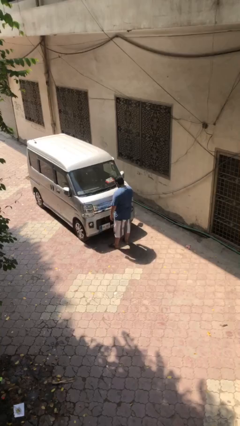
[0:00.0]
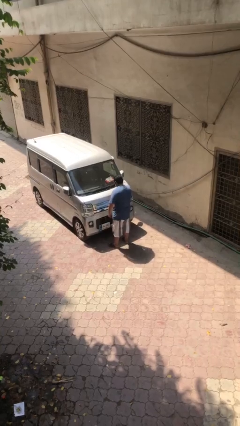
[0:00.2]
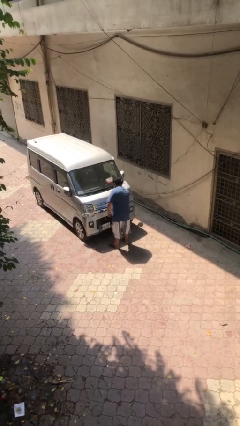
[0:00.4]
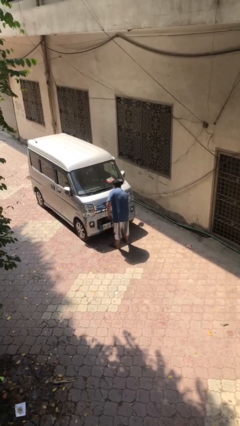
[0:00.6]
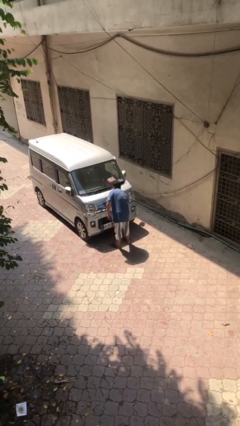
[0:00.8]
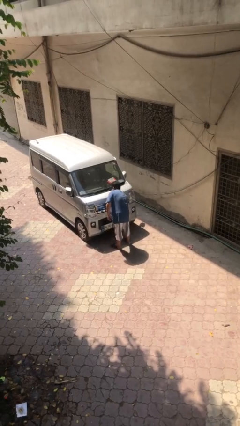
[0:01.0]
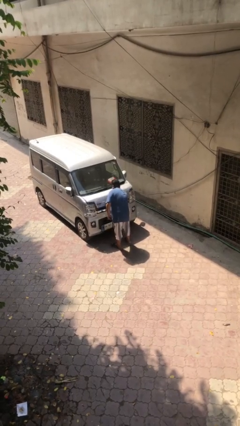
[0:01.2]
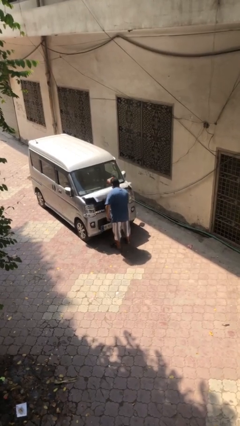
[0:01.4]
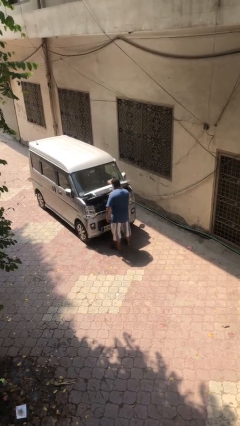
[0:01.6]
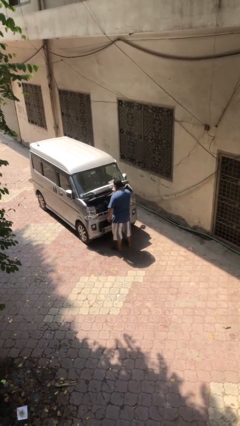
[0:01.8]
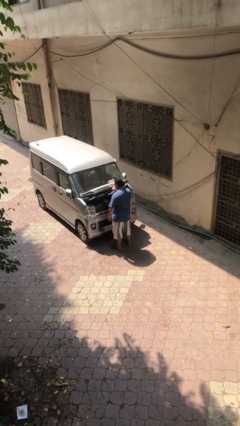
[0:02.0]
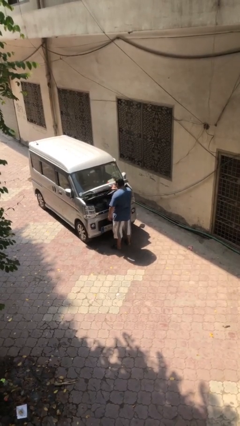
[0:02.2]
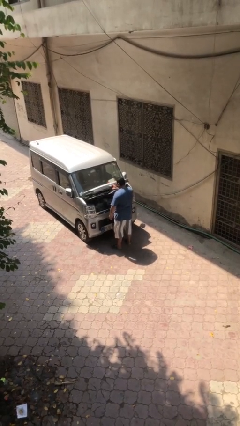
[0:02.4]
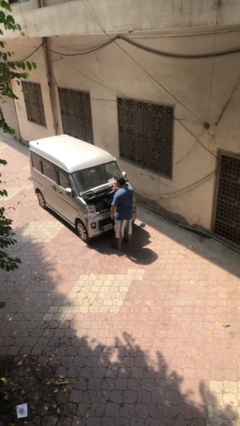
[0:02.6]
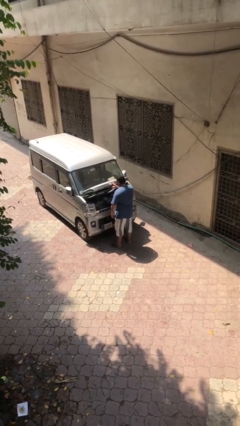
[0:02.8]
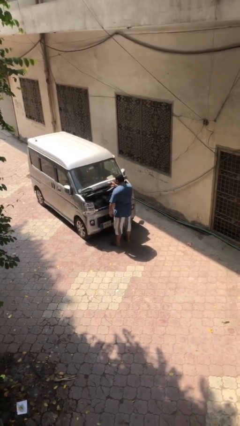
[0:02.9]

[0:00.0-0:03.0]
person opens car hood

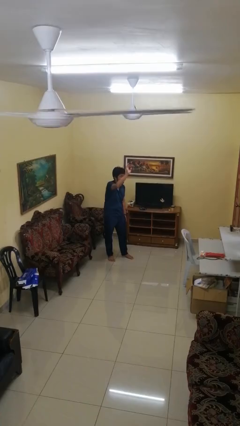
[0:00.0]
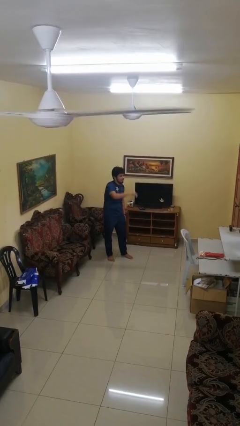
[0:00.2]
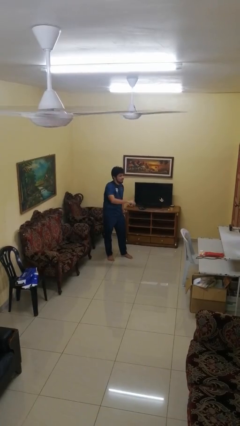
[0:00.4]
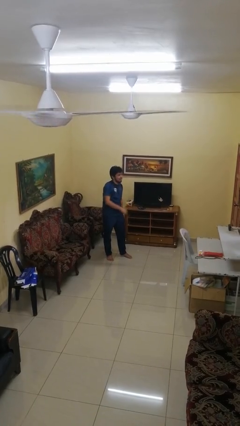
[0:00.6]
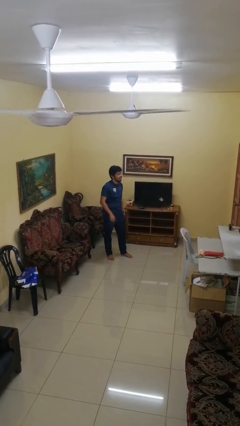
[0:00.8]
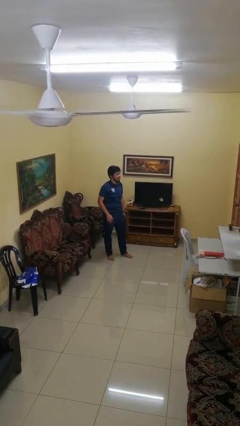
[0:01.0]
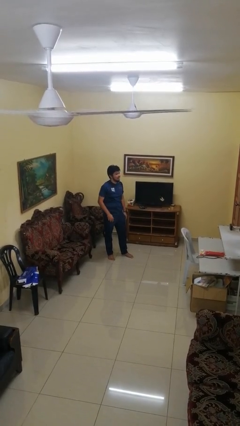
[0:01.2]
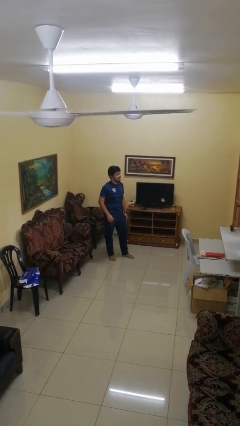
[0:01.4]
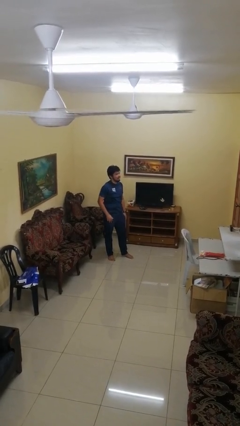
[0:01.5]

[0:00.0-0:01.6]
person gestures swipe down

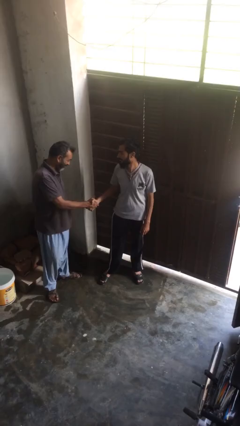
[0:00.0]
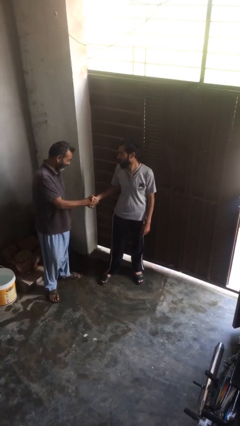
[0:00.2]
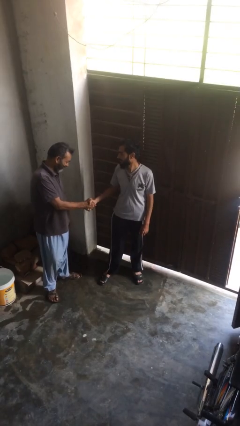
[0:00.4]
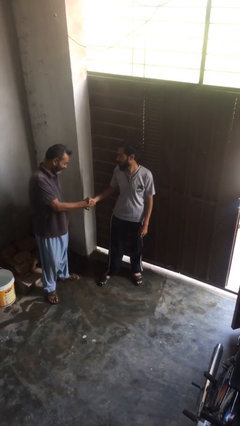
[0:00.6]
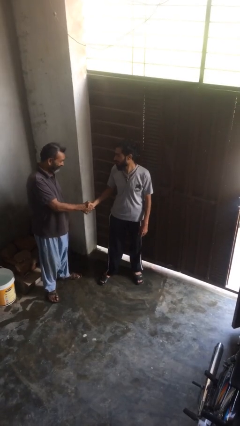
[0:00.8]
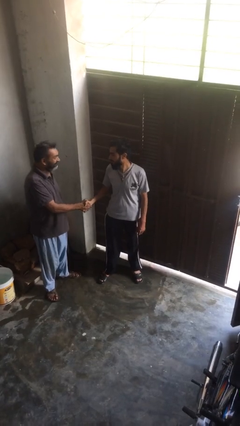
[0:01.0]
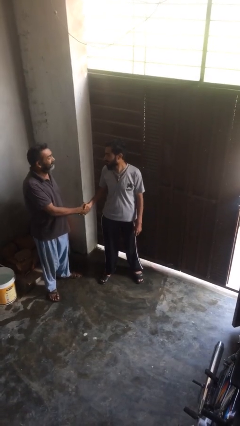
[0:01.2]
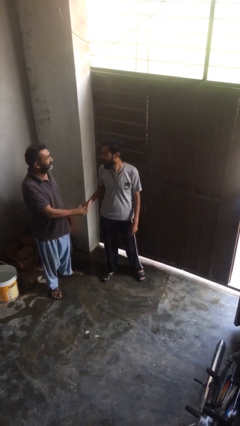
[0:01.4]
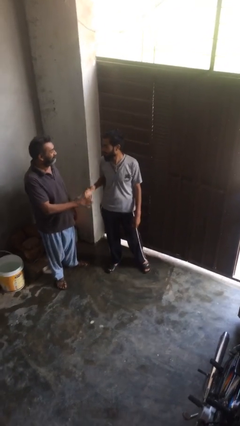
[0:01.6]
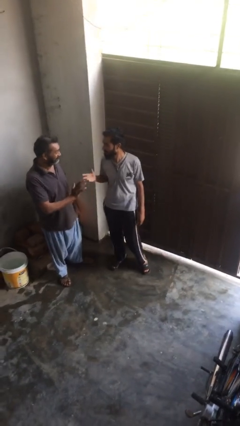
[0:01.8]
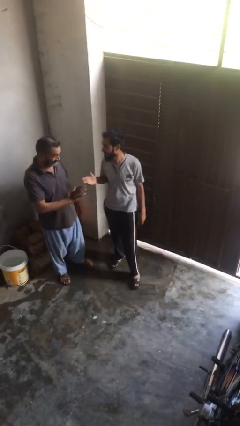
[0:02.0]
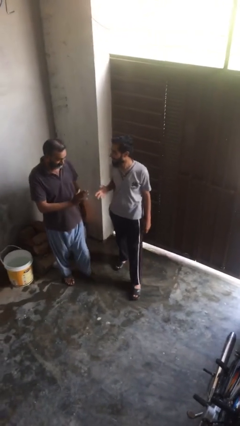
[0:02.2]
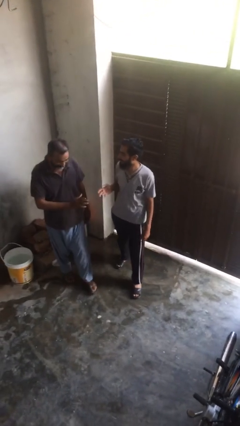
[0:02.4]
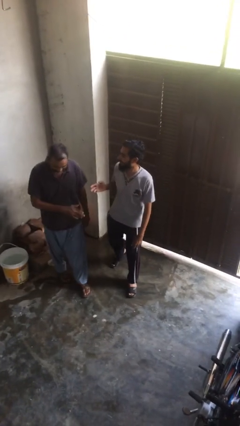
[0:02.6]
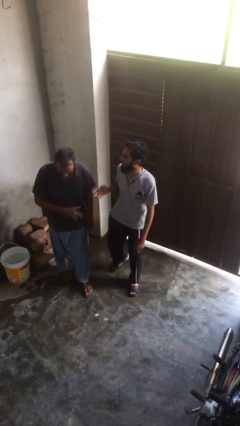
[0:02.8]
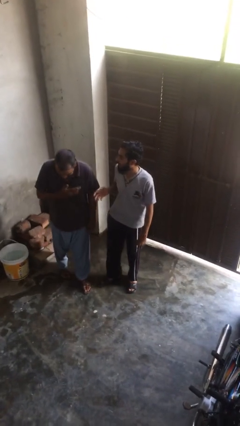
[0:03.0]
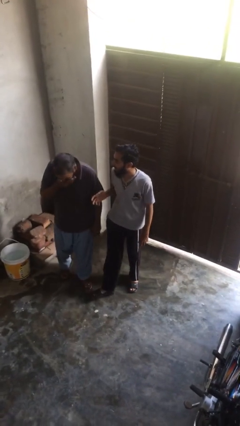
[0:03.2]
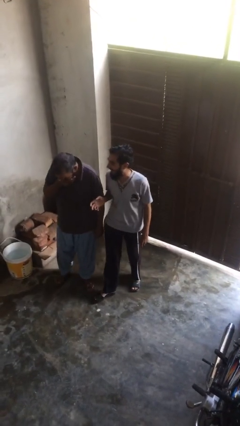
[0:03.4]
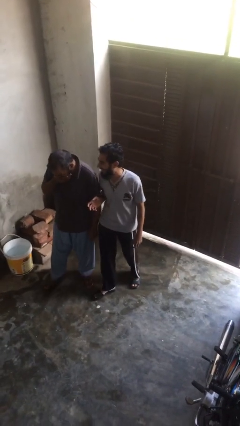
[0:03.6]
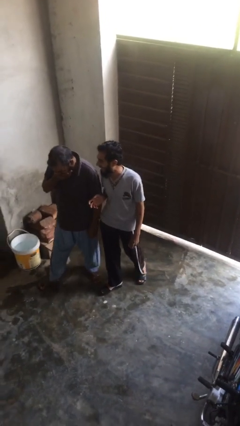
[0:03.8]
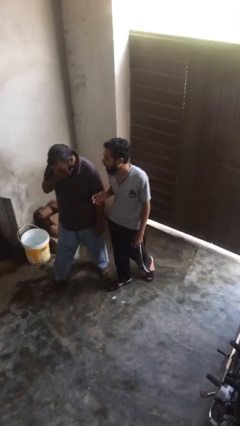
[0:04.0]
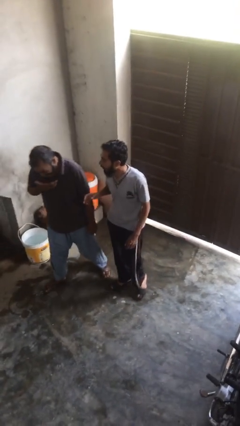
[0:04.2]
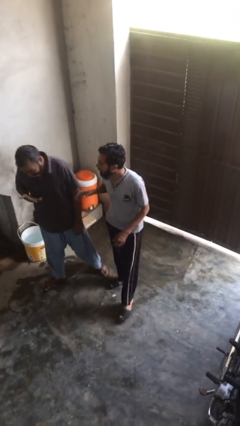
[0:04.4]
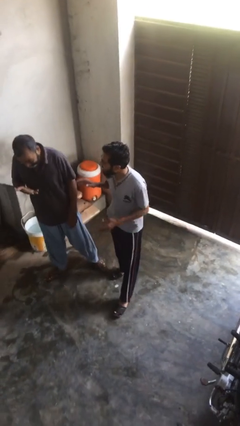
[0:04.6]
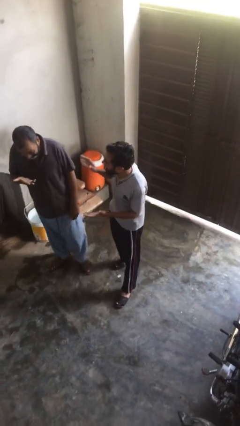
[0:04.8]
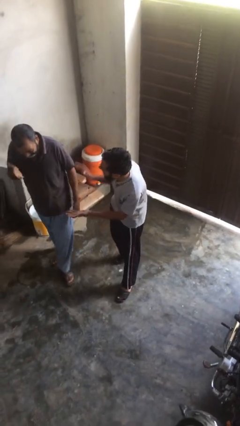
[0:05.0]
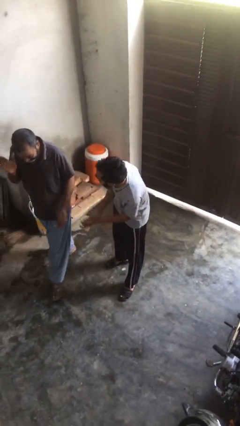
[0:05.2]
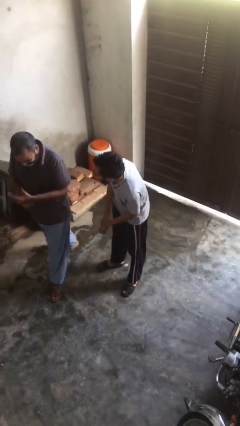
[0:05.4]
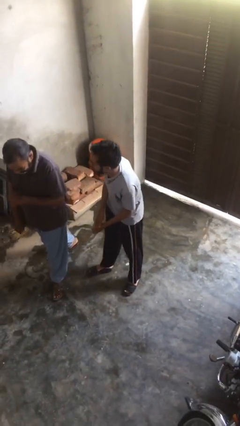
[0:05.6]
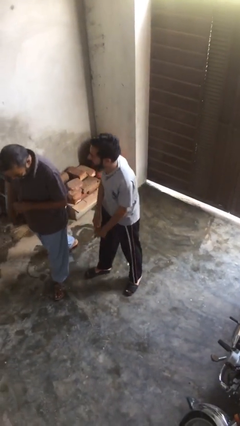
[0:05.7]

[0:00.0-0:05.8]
person talks to person

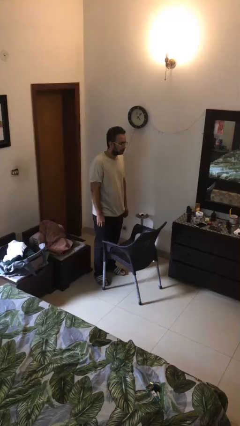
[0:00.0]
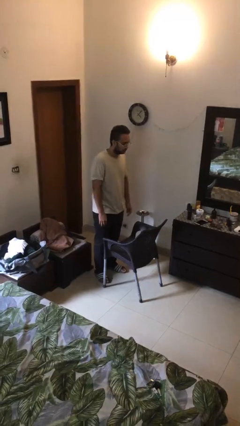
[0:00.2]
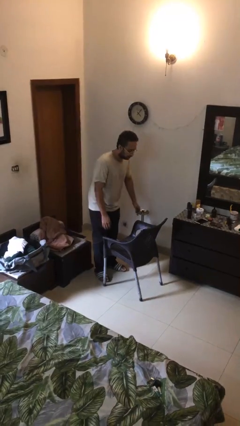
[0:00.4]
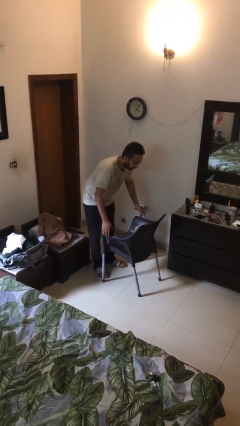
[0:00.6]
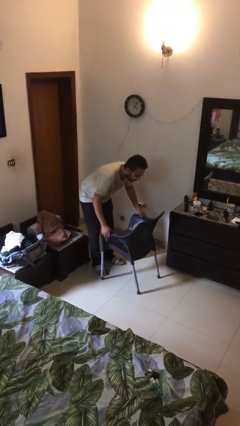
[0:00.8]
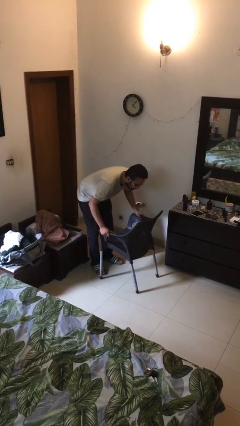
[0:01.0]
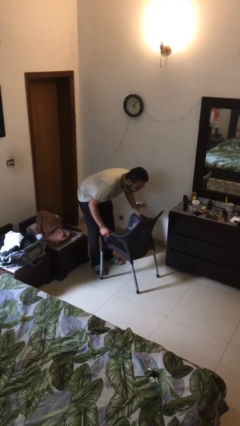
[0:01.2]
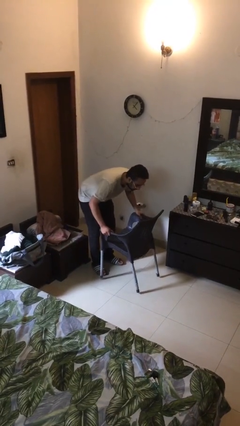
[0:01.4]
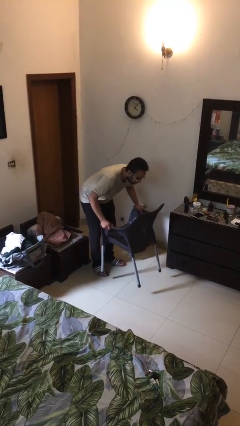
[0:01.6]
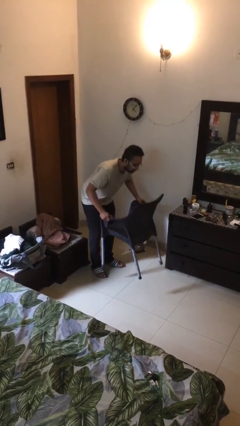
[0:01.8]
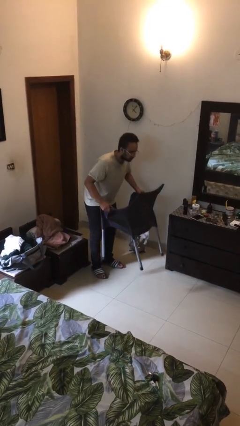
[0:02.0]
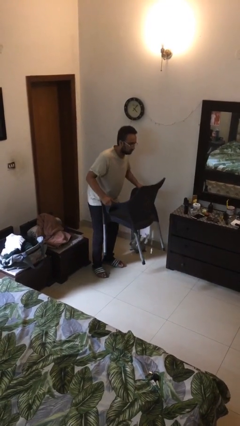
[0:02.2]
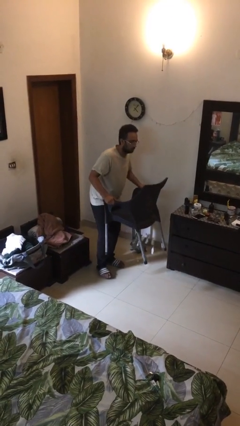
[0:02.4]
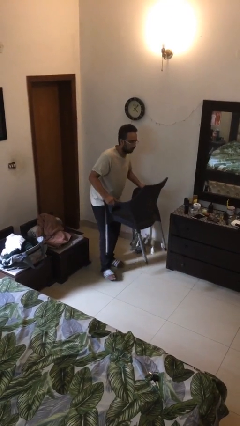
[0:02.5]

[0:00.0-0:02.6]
person picks up object from floor

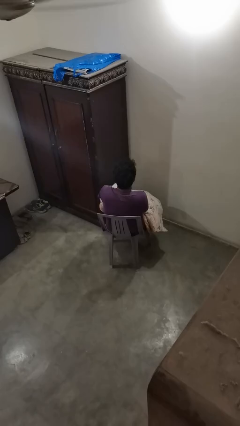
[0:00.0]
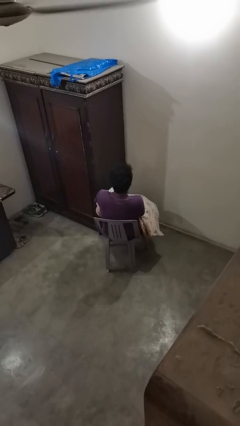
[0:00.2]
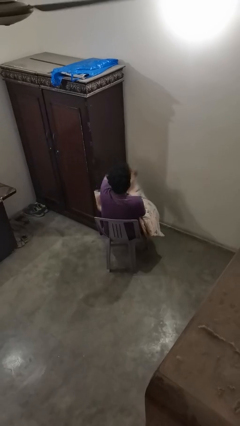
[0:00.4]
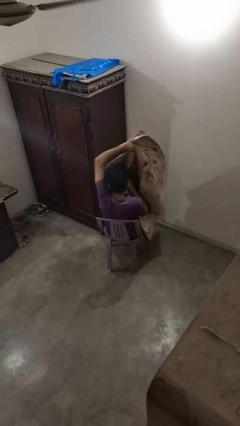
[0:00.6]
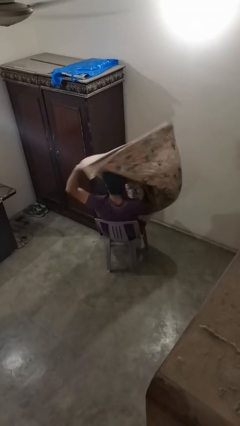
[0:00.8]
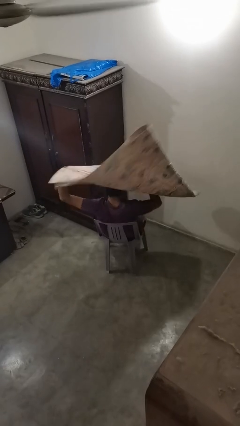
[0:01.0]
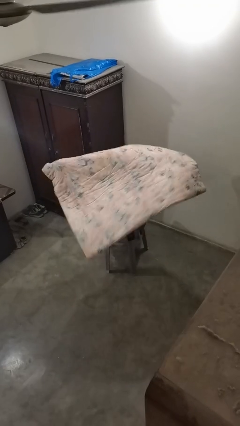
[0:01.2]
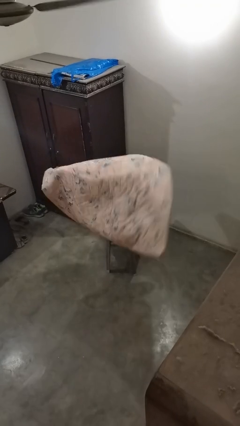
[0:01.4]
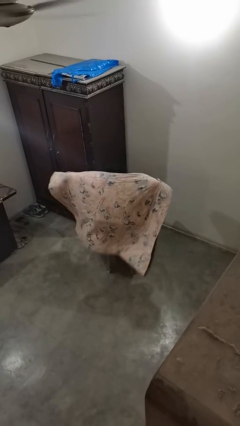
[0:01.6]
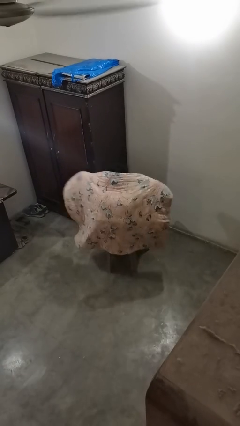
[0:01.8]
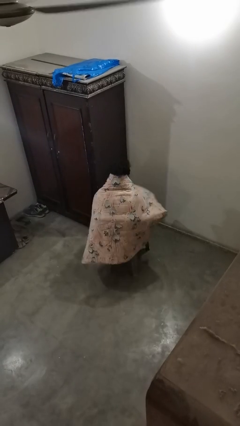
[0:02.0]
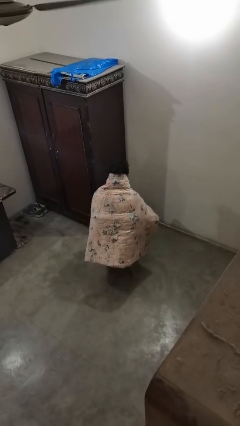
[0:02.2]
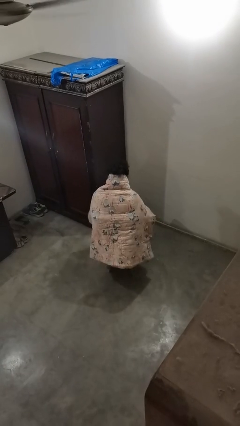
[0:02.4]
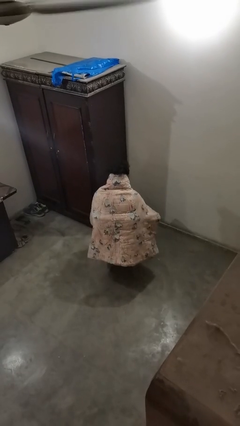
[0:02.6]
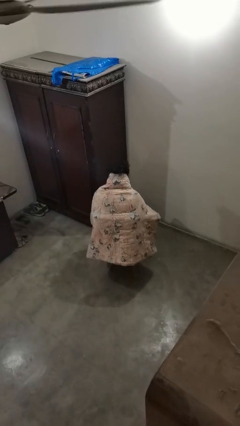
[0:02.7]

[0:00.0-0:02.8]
person covers with blanket

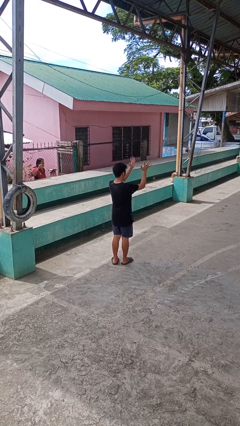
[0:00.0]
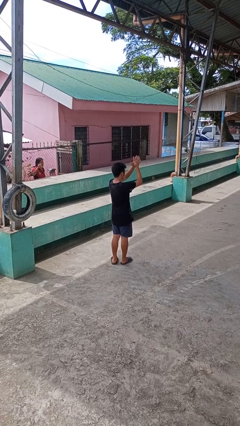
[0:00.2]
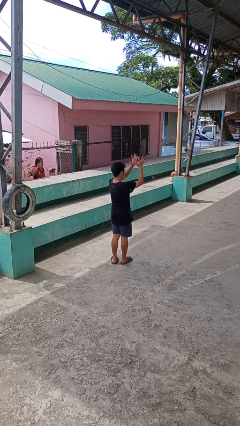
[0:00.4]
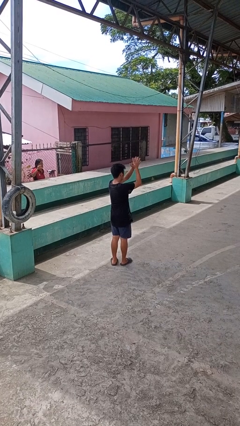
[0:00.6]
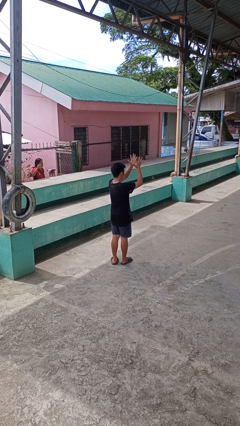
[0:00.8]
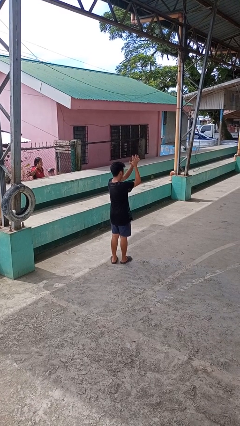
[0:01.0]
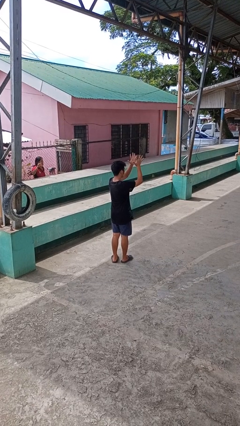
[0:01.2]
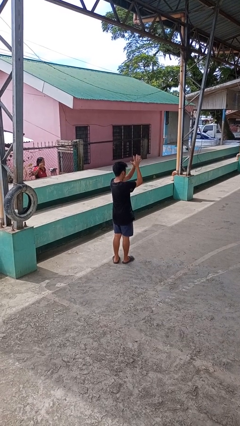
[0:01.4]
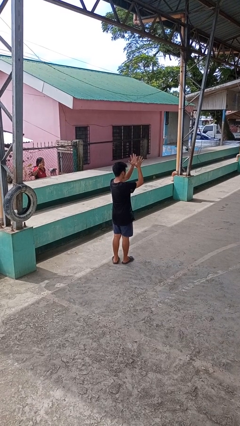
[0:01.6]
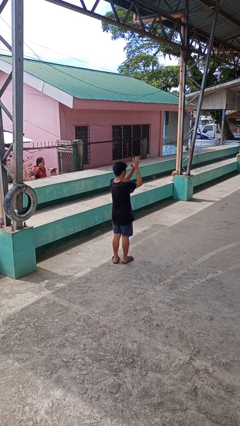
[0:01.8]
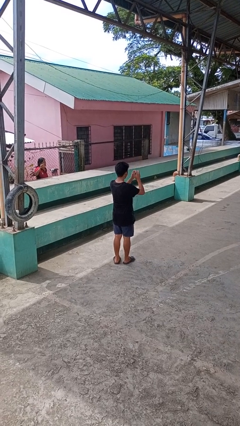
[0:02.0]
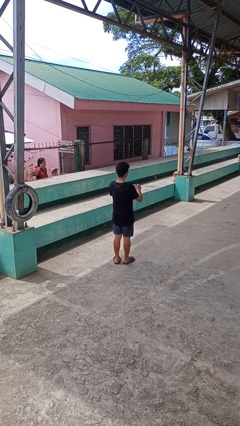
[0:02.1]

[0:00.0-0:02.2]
person claps hands
